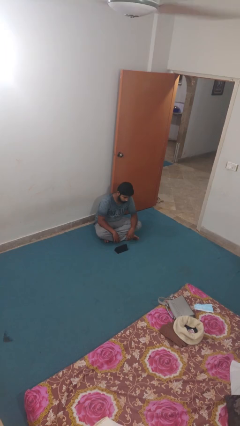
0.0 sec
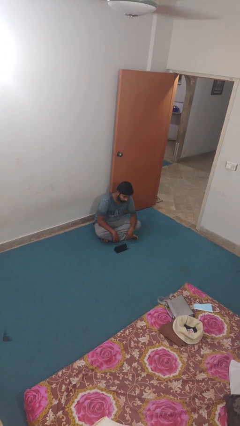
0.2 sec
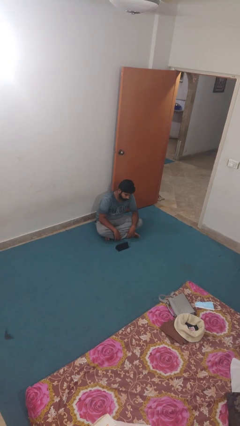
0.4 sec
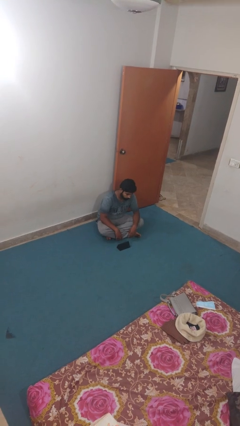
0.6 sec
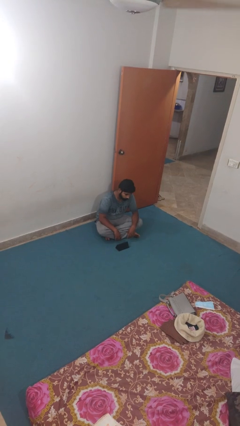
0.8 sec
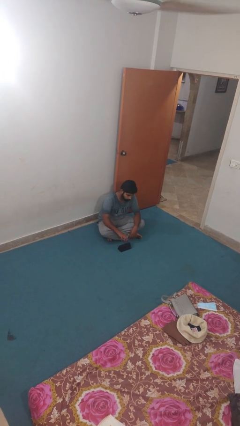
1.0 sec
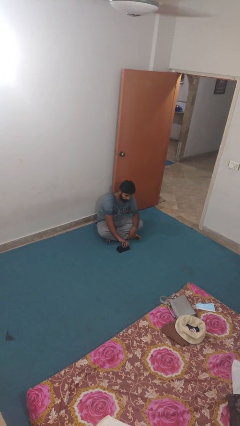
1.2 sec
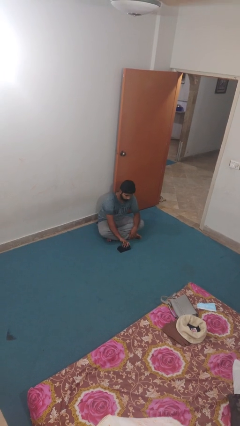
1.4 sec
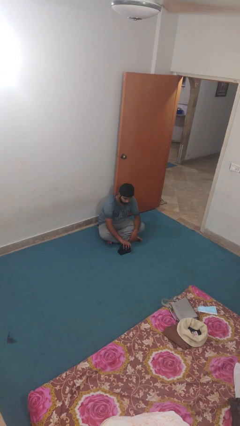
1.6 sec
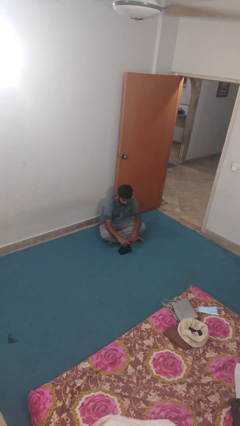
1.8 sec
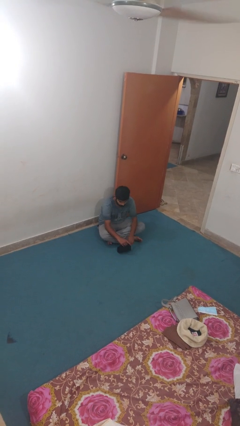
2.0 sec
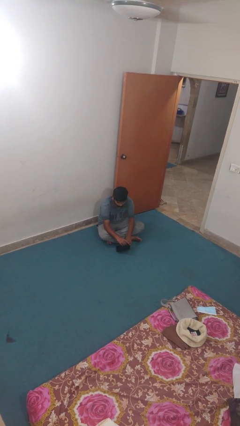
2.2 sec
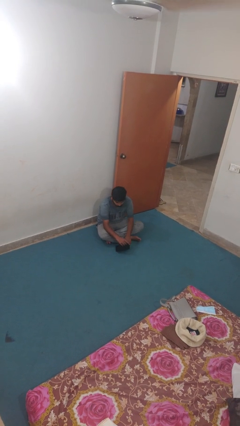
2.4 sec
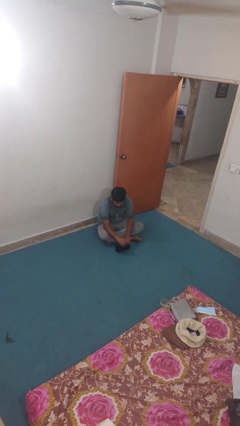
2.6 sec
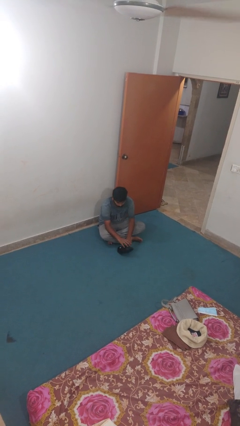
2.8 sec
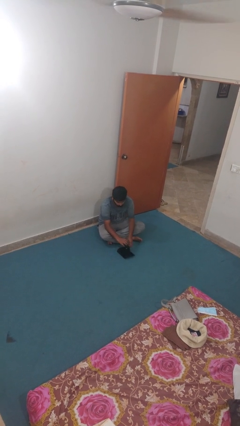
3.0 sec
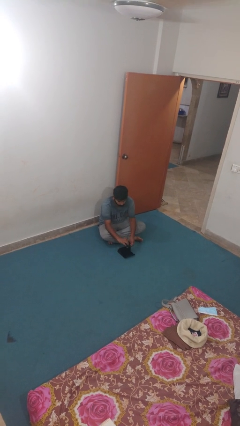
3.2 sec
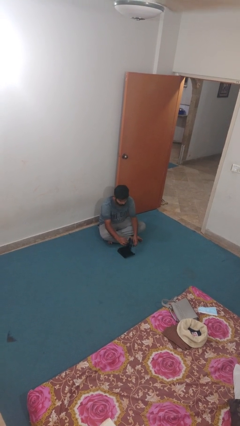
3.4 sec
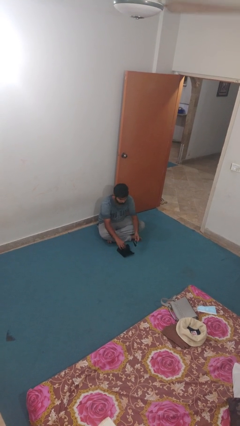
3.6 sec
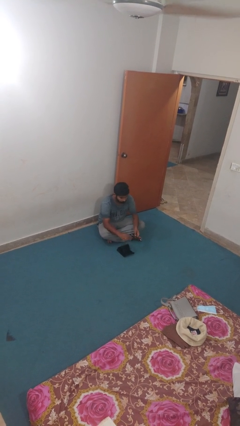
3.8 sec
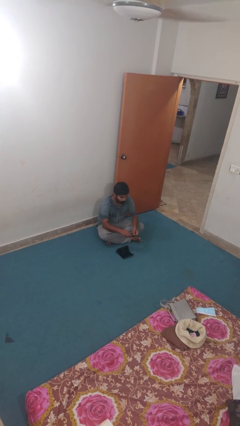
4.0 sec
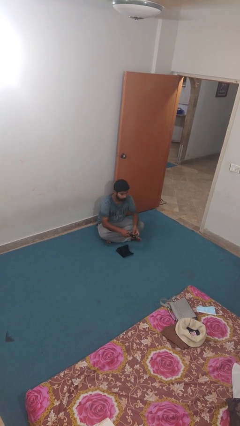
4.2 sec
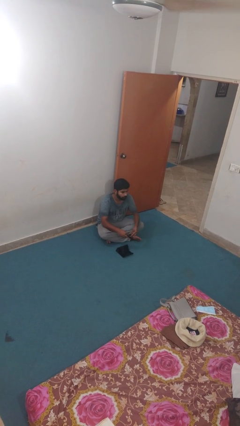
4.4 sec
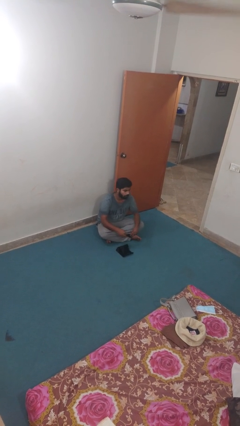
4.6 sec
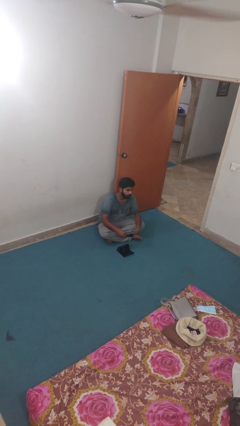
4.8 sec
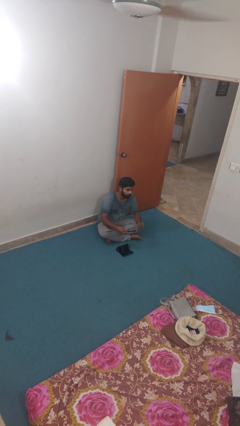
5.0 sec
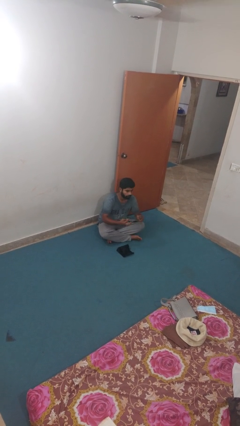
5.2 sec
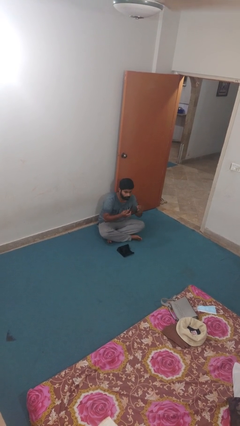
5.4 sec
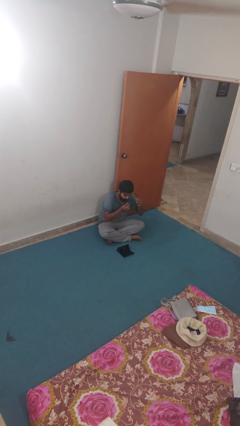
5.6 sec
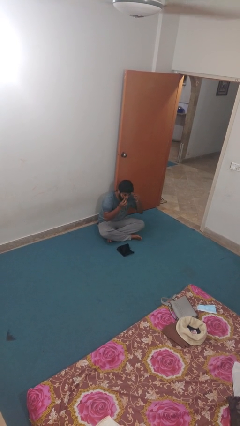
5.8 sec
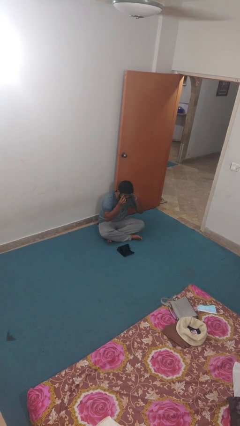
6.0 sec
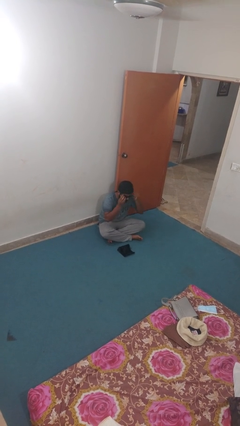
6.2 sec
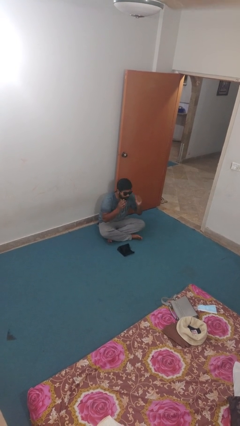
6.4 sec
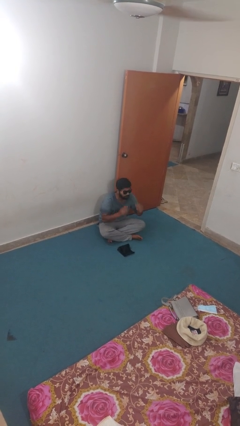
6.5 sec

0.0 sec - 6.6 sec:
person puts on sunglasses

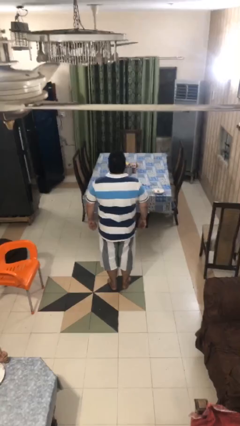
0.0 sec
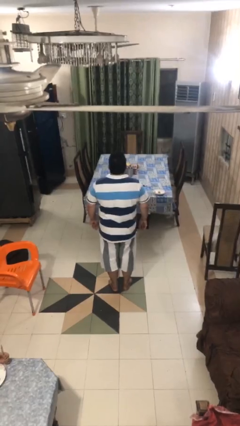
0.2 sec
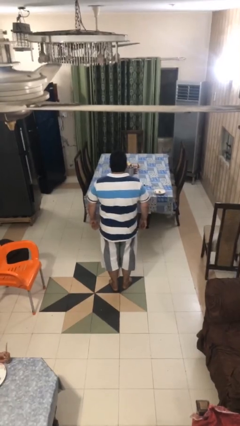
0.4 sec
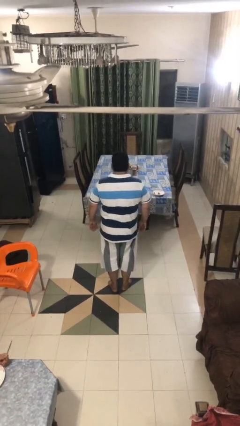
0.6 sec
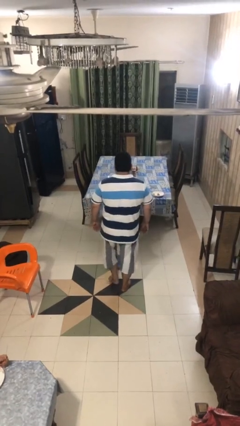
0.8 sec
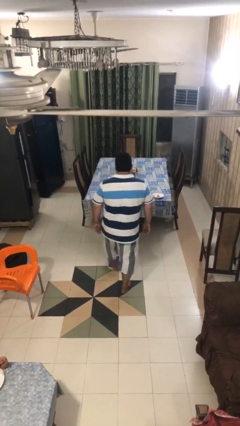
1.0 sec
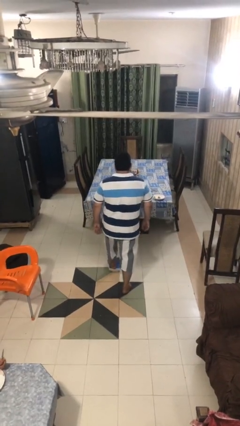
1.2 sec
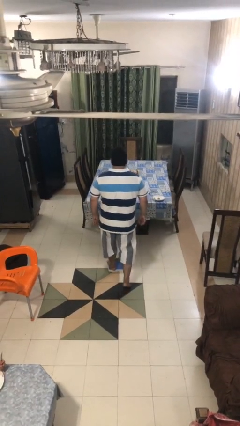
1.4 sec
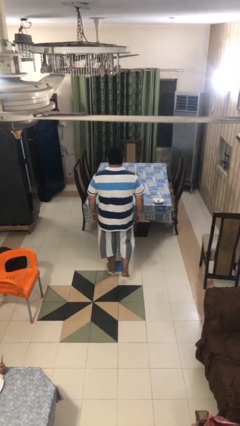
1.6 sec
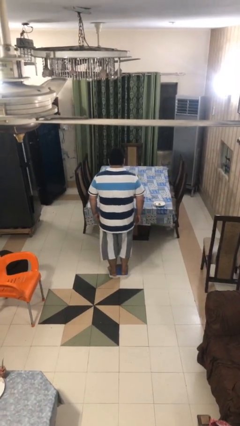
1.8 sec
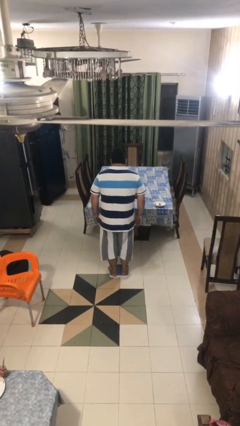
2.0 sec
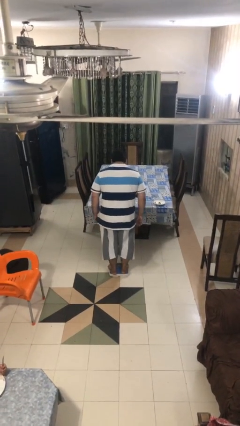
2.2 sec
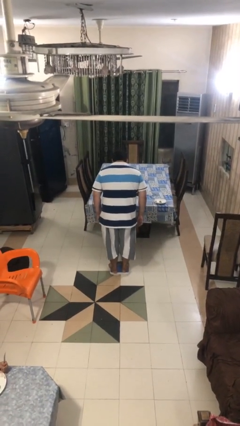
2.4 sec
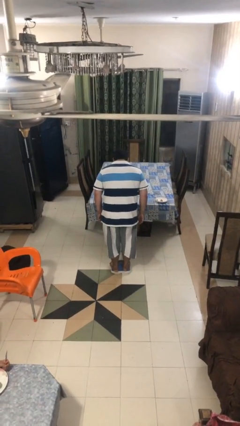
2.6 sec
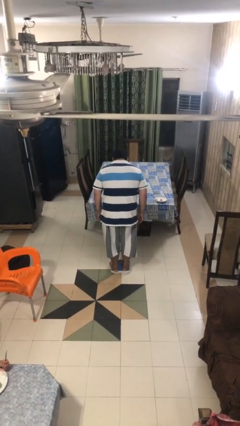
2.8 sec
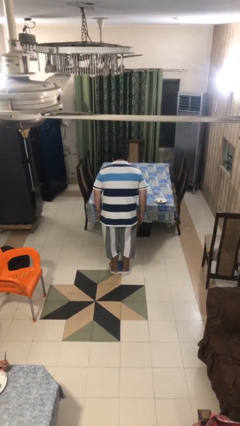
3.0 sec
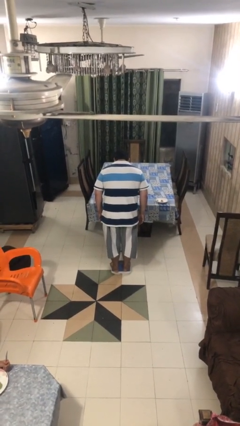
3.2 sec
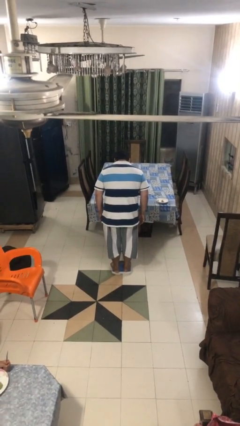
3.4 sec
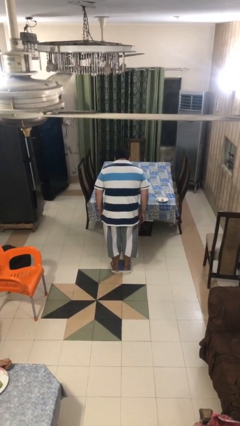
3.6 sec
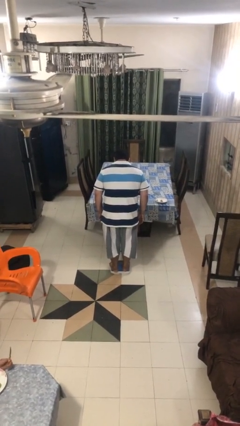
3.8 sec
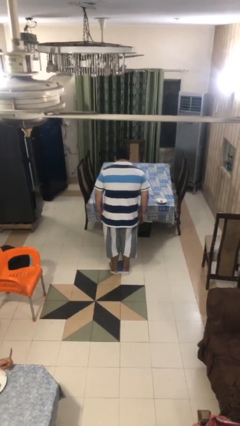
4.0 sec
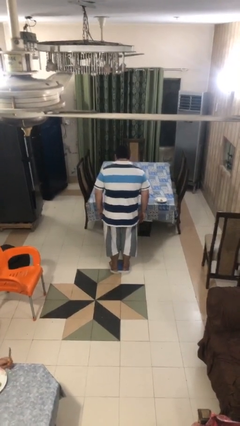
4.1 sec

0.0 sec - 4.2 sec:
person uses bodyweight scale

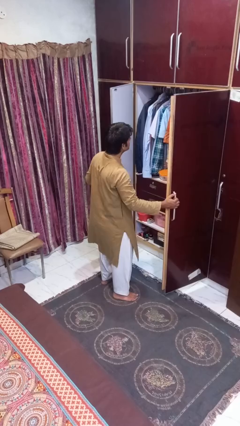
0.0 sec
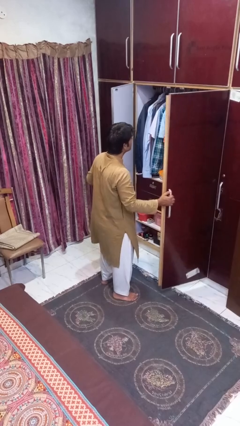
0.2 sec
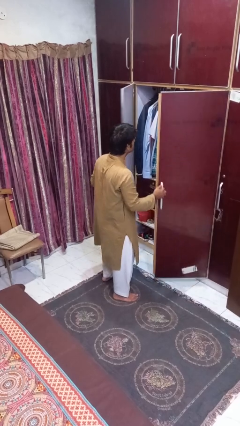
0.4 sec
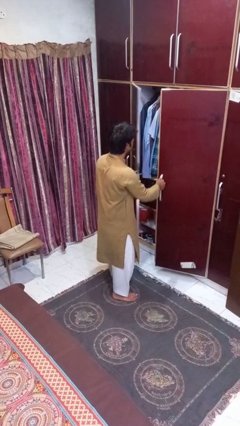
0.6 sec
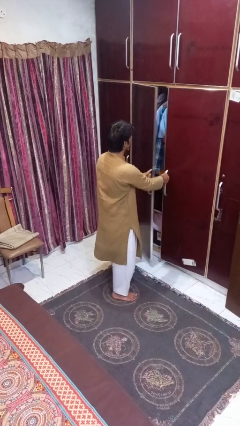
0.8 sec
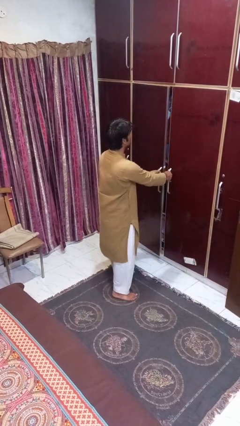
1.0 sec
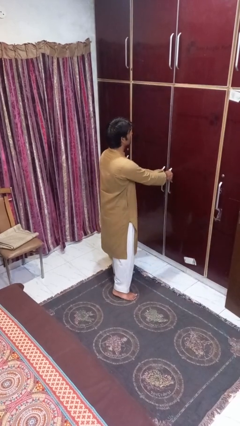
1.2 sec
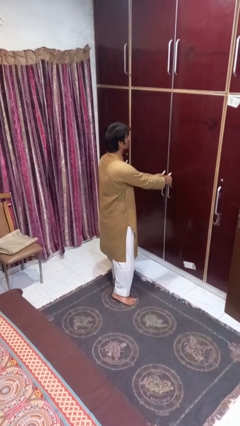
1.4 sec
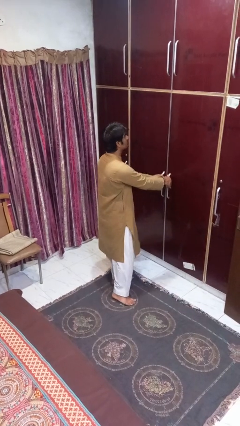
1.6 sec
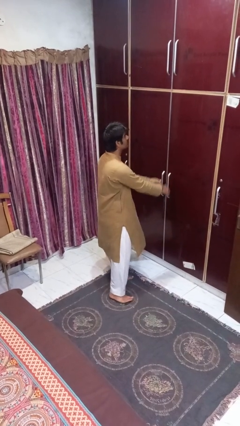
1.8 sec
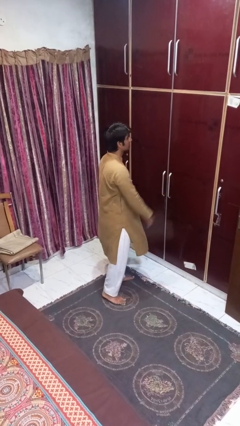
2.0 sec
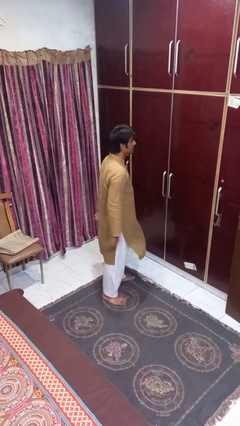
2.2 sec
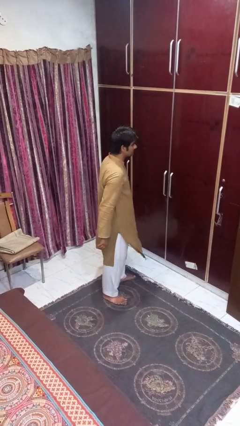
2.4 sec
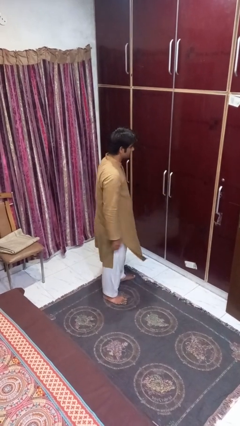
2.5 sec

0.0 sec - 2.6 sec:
person closes closet door

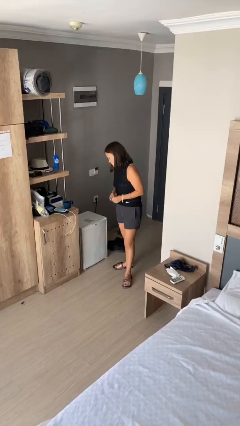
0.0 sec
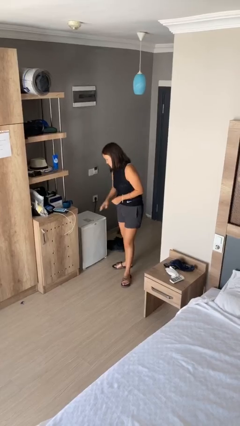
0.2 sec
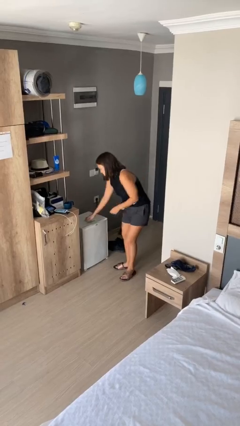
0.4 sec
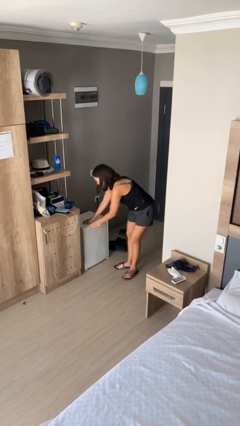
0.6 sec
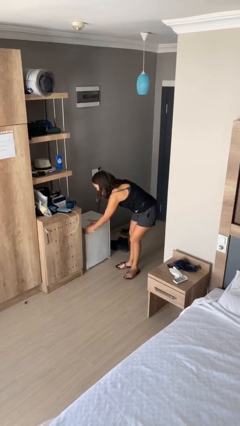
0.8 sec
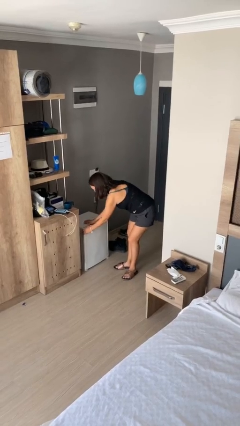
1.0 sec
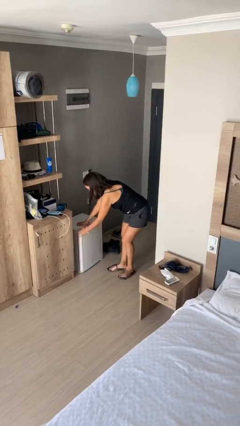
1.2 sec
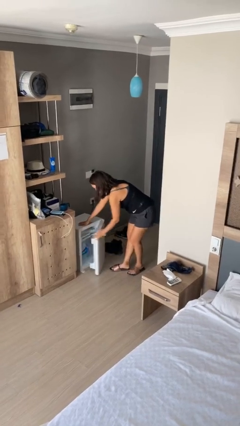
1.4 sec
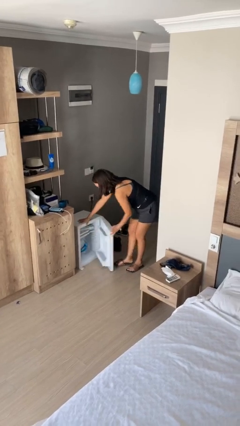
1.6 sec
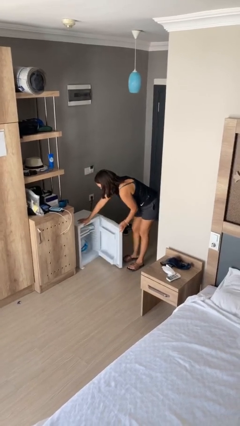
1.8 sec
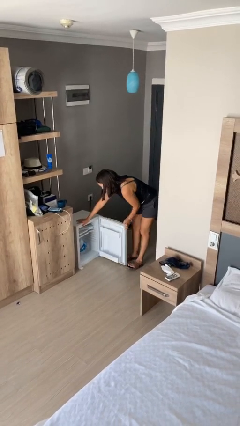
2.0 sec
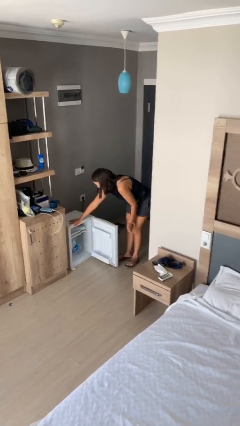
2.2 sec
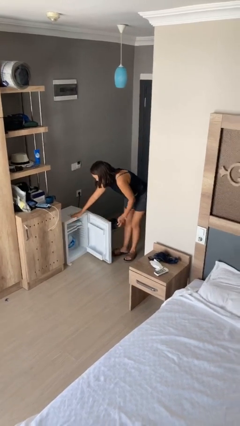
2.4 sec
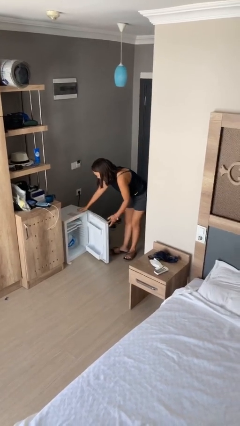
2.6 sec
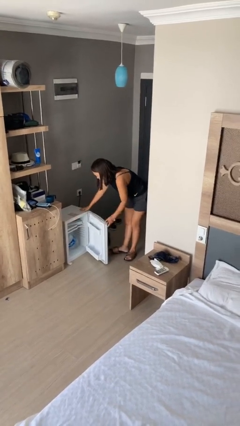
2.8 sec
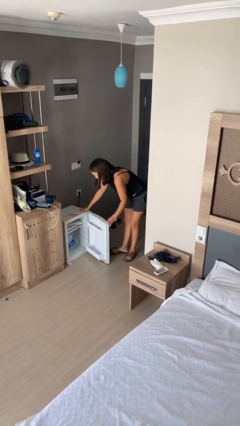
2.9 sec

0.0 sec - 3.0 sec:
person opens refrigerator

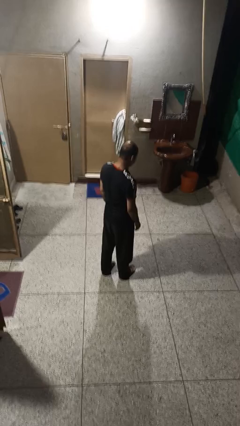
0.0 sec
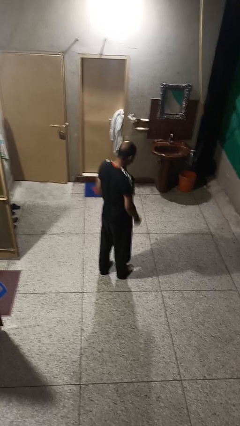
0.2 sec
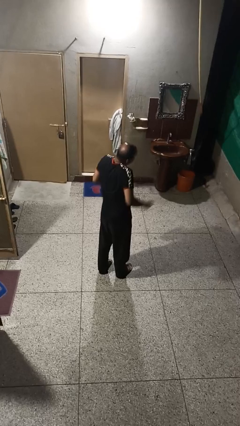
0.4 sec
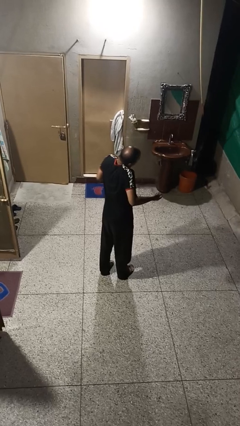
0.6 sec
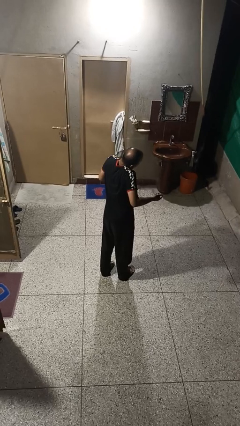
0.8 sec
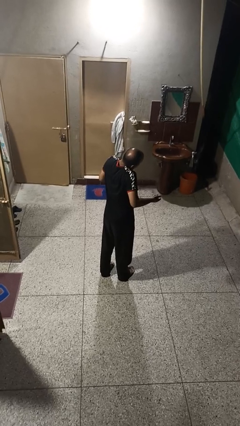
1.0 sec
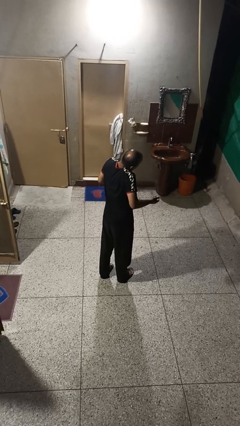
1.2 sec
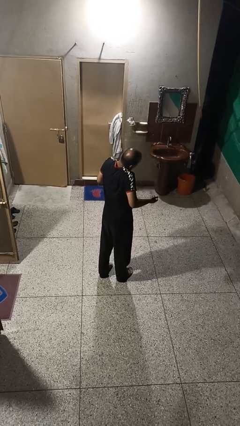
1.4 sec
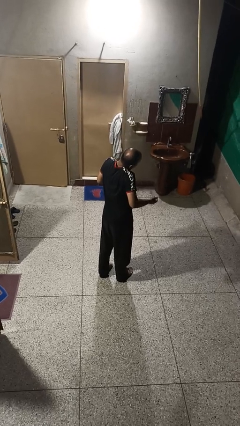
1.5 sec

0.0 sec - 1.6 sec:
person shrugs

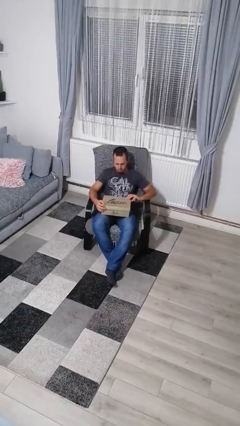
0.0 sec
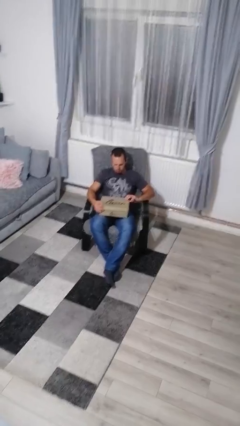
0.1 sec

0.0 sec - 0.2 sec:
person opens box
